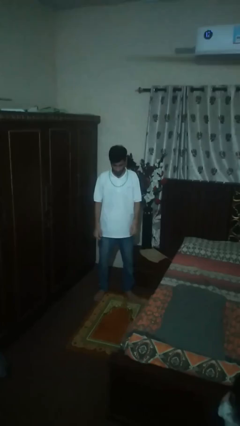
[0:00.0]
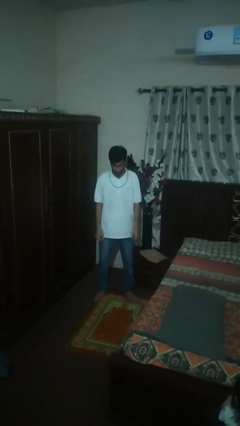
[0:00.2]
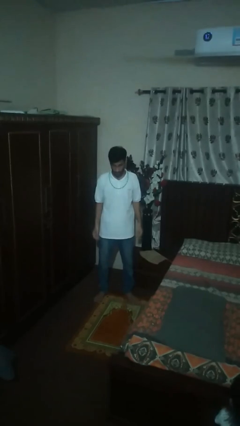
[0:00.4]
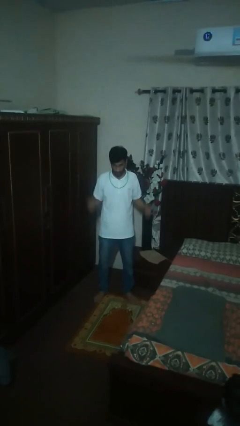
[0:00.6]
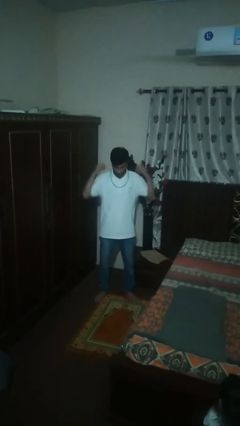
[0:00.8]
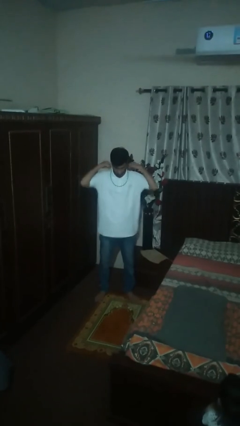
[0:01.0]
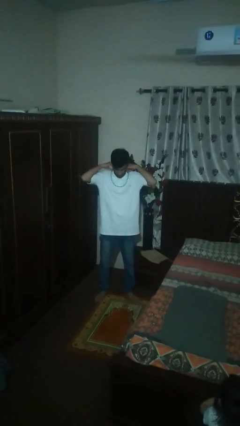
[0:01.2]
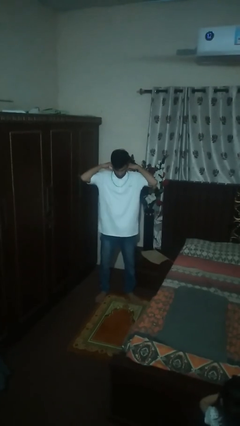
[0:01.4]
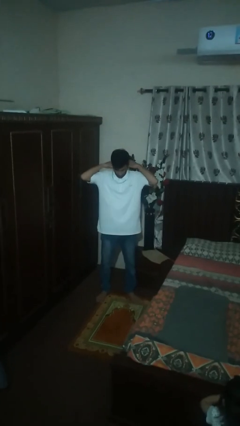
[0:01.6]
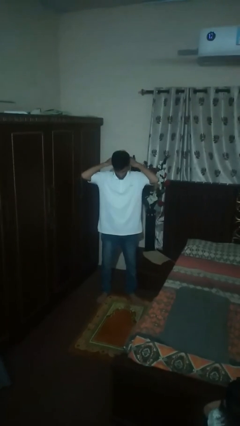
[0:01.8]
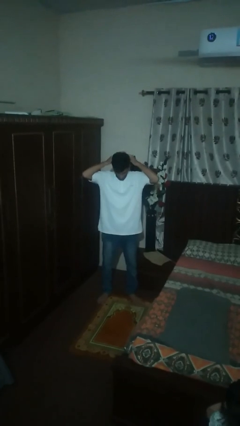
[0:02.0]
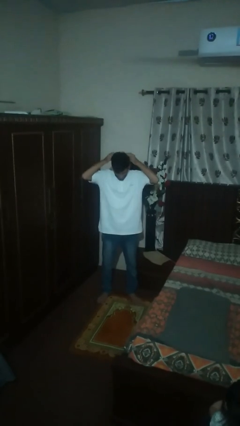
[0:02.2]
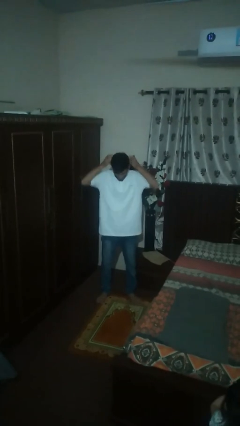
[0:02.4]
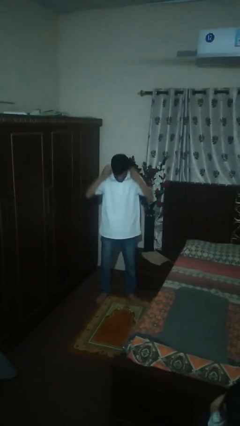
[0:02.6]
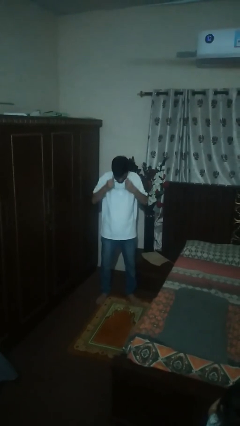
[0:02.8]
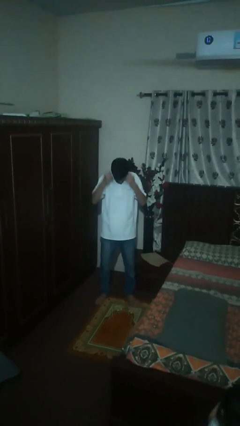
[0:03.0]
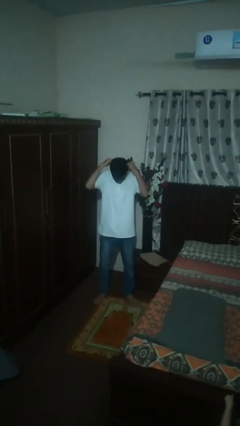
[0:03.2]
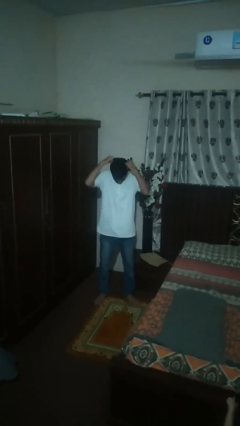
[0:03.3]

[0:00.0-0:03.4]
person takes off necklace

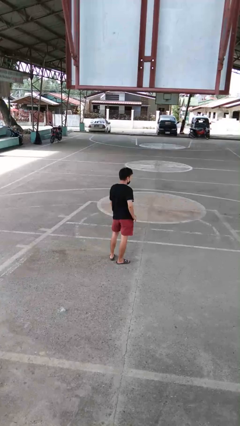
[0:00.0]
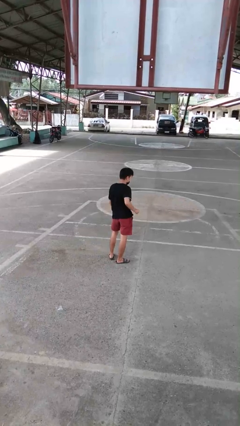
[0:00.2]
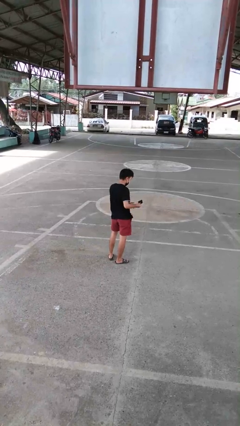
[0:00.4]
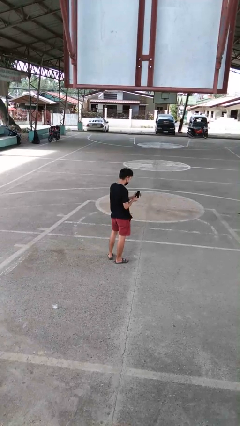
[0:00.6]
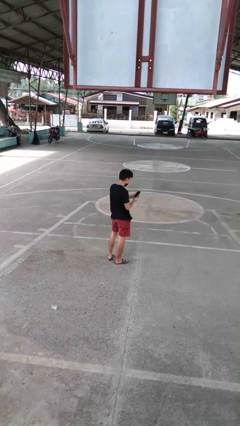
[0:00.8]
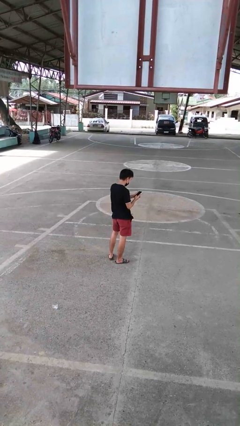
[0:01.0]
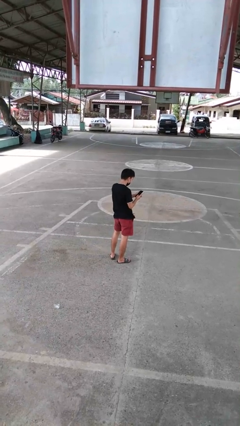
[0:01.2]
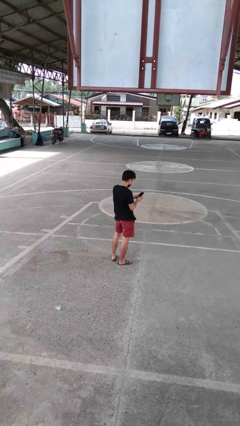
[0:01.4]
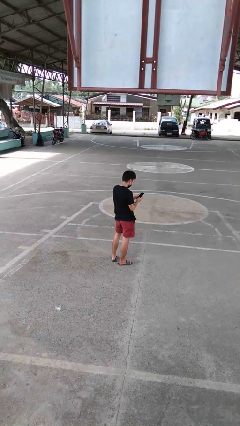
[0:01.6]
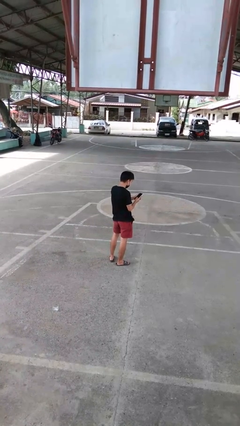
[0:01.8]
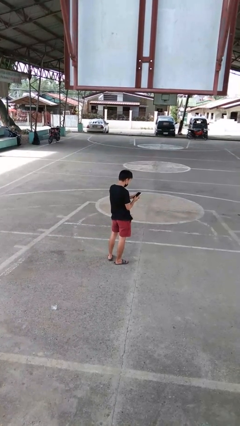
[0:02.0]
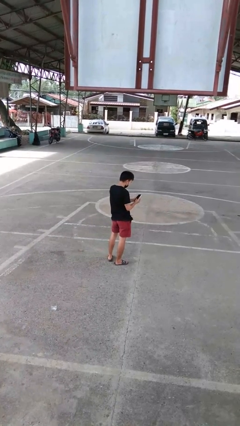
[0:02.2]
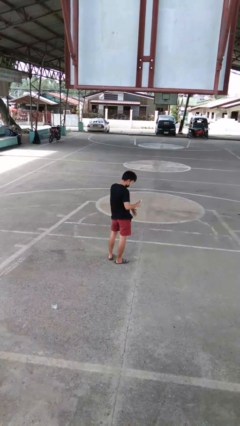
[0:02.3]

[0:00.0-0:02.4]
person takes phone from pocket

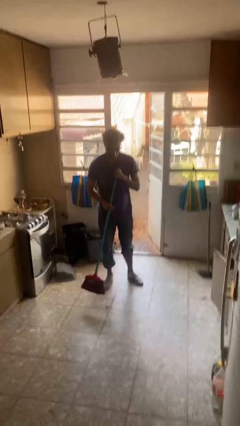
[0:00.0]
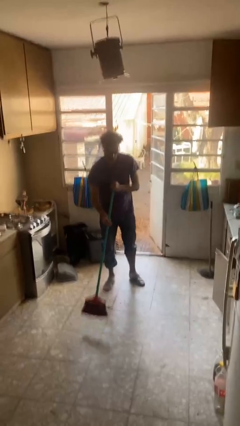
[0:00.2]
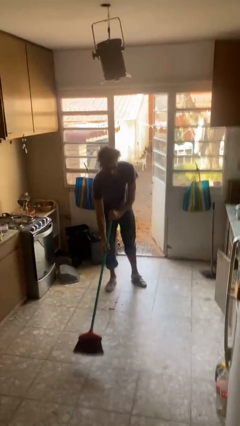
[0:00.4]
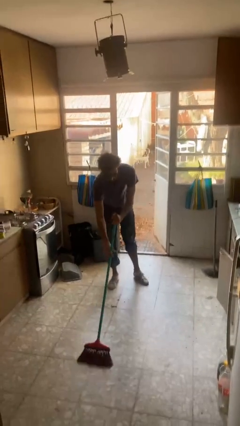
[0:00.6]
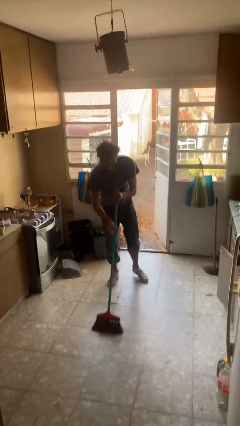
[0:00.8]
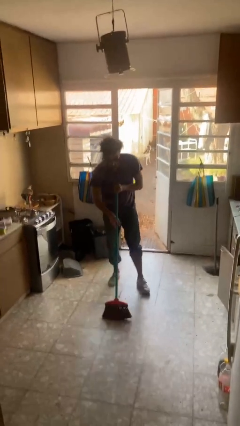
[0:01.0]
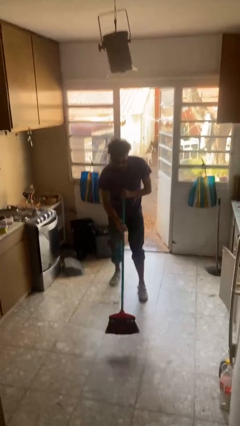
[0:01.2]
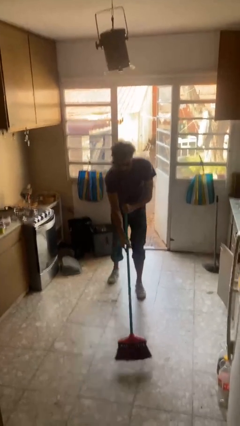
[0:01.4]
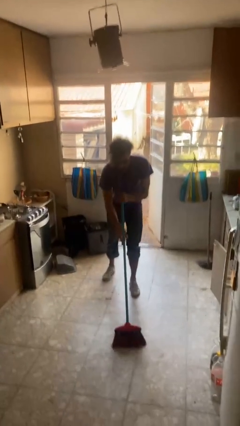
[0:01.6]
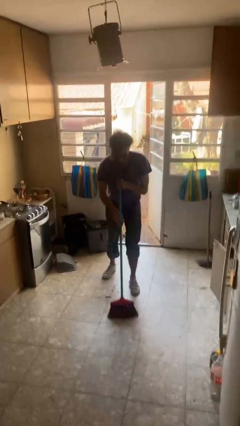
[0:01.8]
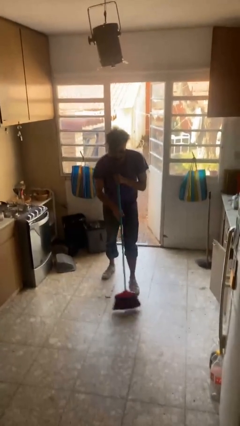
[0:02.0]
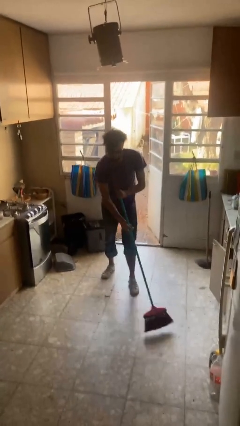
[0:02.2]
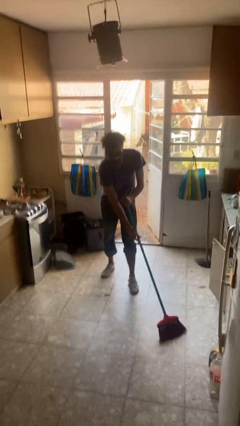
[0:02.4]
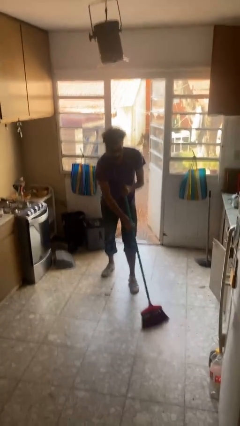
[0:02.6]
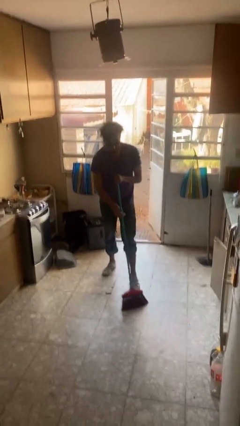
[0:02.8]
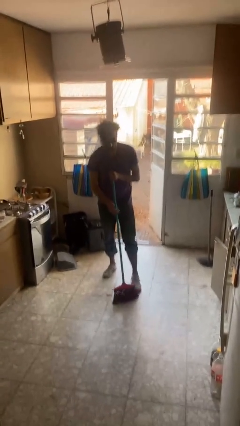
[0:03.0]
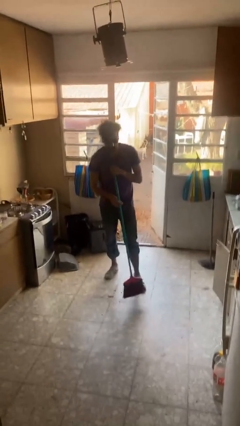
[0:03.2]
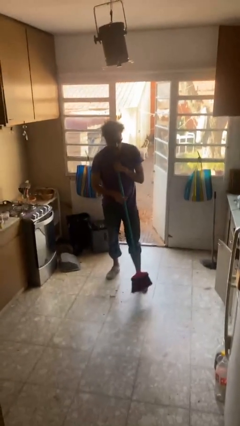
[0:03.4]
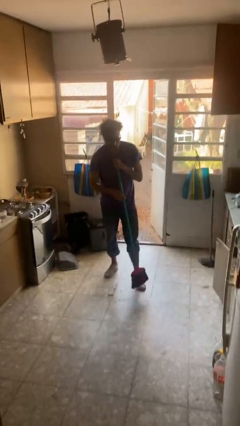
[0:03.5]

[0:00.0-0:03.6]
person sweeps floor

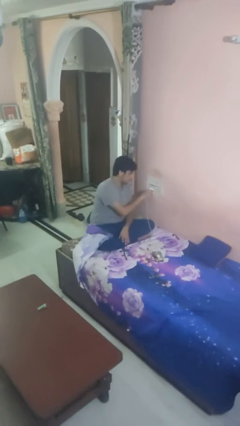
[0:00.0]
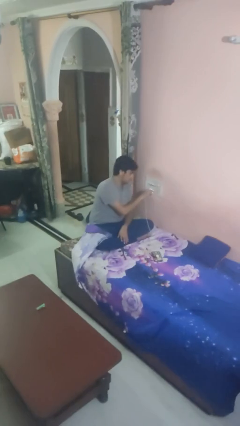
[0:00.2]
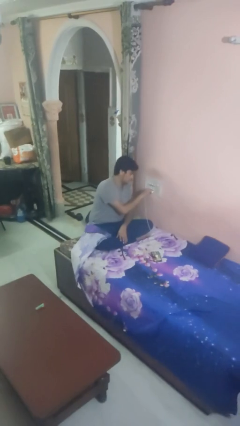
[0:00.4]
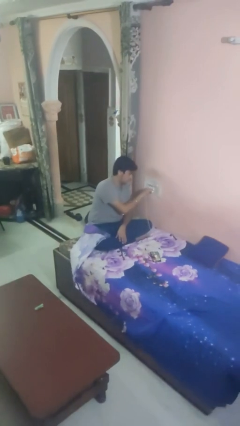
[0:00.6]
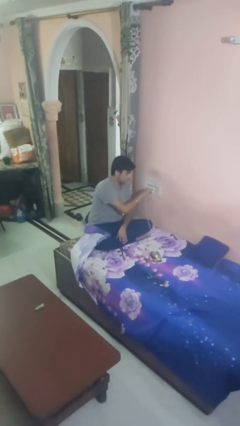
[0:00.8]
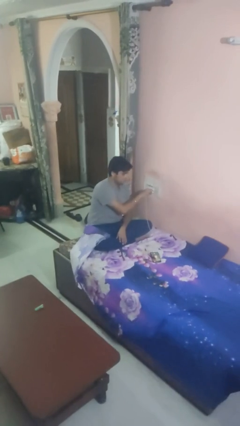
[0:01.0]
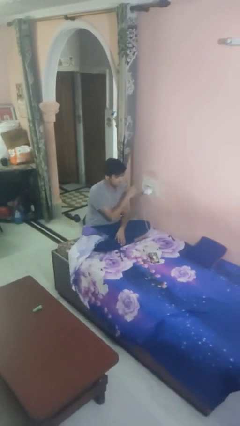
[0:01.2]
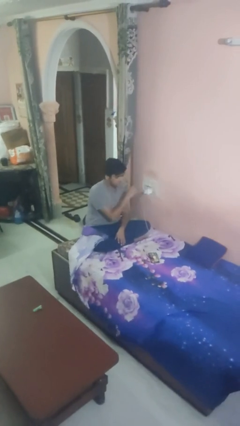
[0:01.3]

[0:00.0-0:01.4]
person plugs into electrical socket

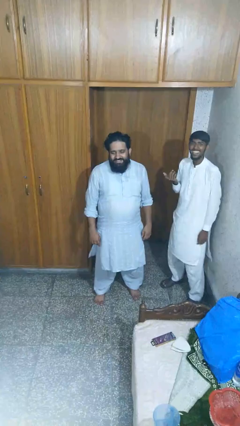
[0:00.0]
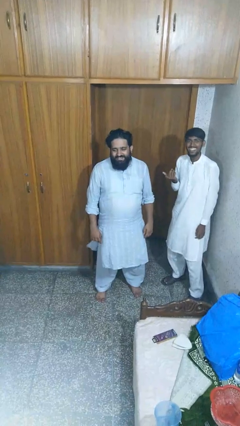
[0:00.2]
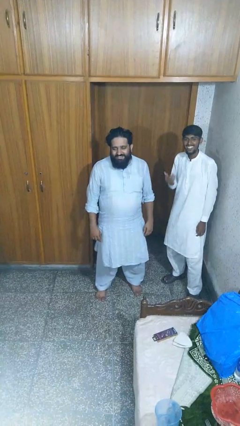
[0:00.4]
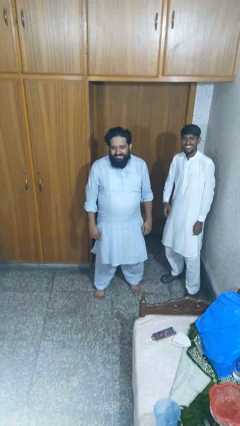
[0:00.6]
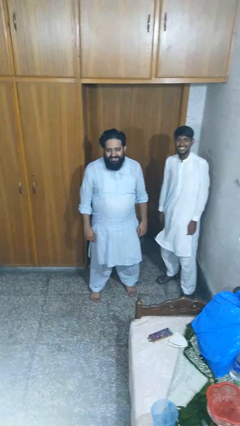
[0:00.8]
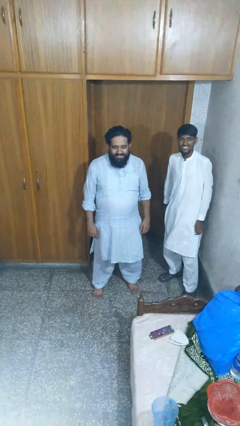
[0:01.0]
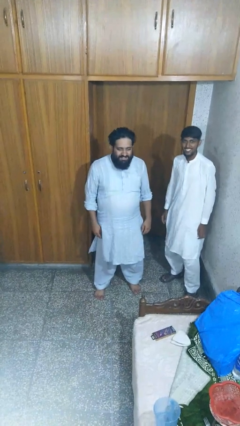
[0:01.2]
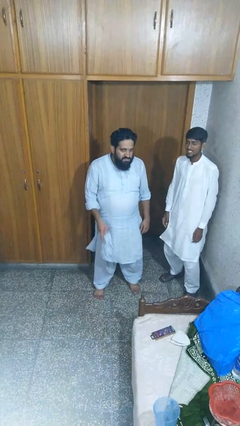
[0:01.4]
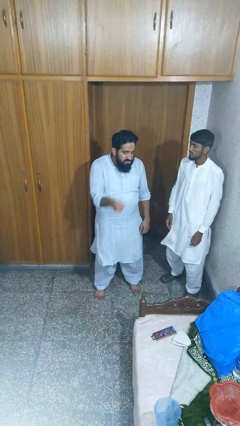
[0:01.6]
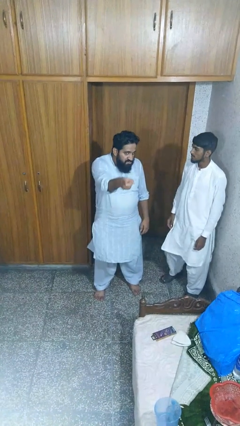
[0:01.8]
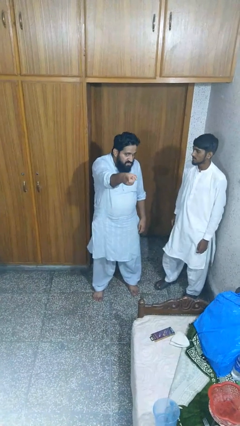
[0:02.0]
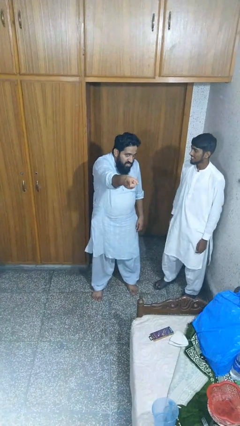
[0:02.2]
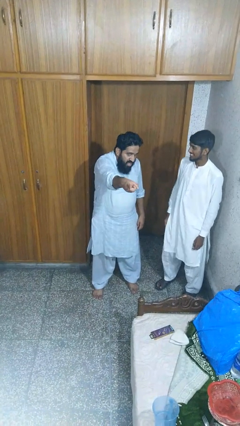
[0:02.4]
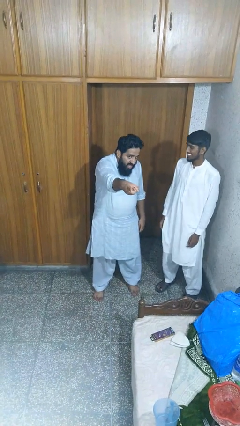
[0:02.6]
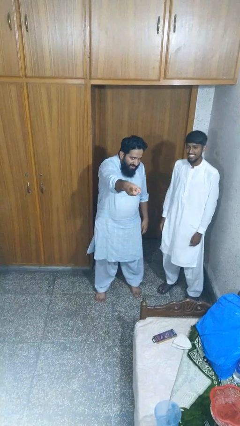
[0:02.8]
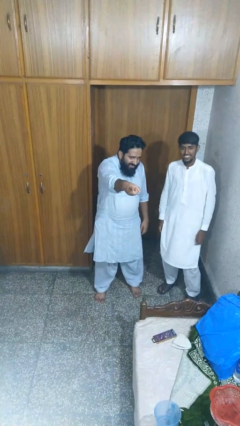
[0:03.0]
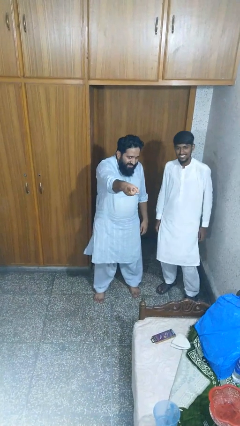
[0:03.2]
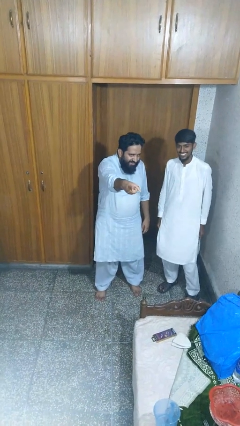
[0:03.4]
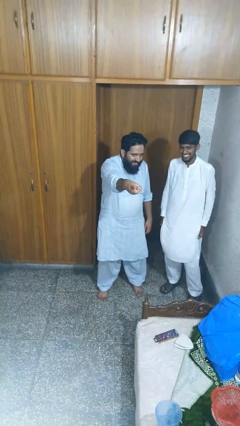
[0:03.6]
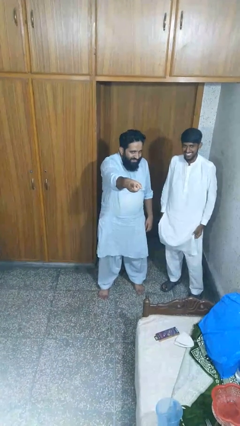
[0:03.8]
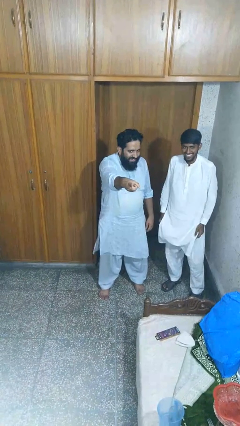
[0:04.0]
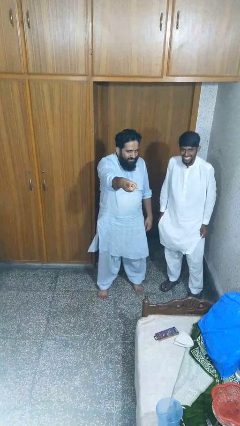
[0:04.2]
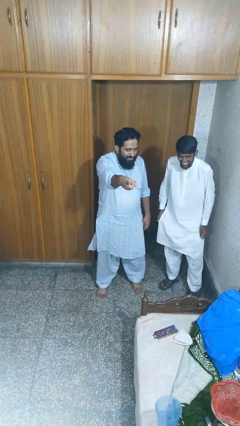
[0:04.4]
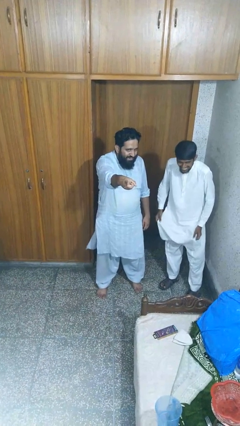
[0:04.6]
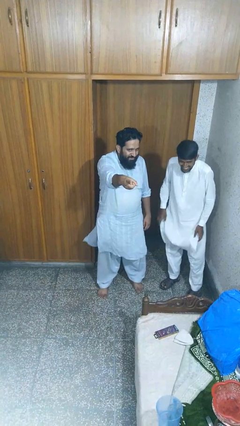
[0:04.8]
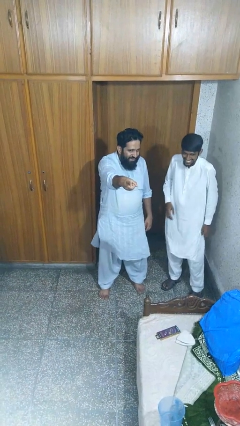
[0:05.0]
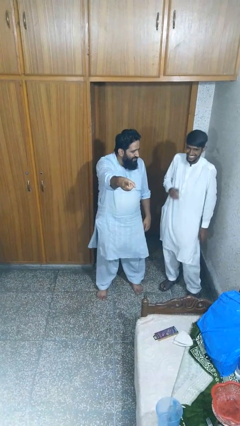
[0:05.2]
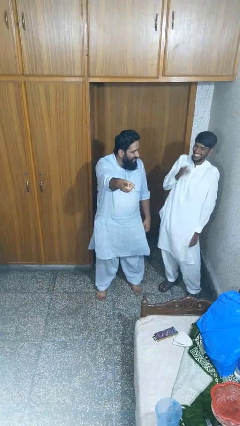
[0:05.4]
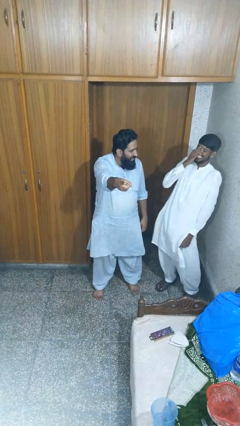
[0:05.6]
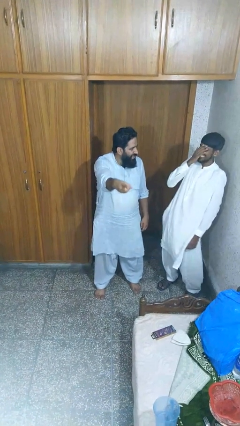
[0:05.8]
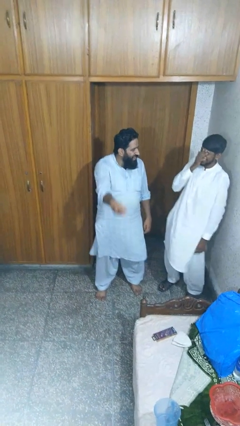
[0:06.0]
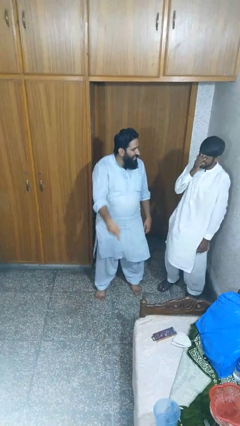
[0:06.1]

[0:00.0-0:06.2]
person points at person
